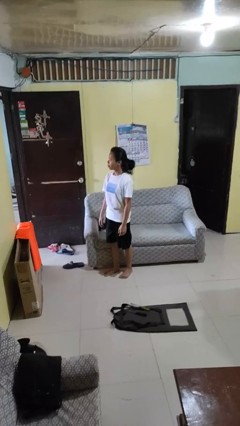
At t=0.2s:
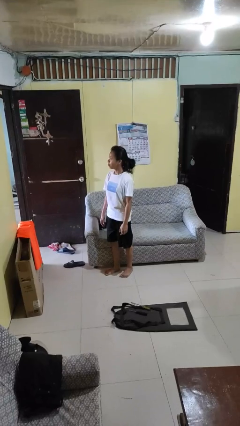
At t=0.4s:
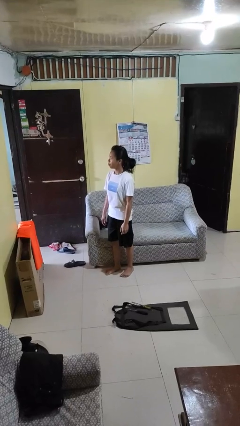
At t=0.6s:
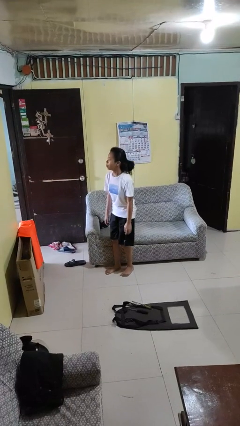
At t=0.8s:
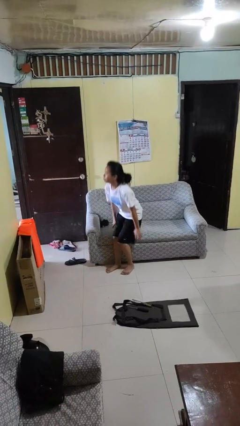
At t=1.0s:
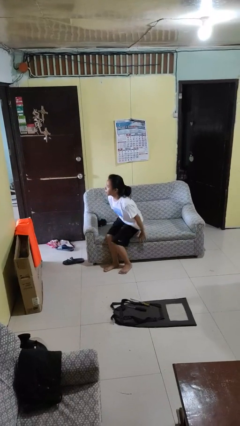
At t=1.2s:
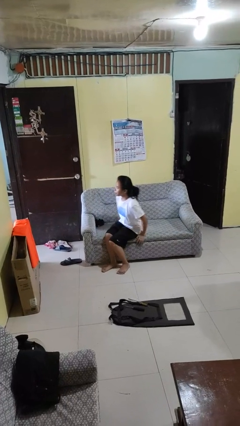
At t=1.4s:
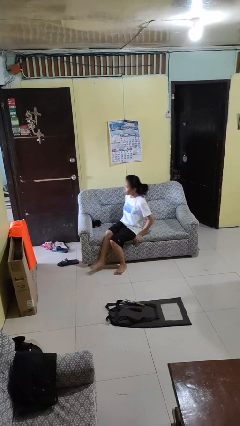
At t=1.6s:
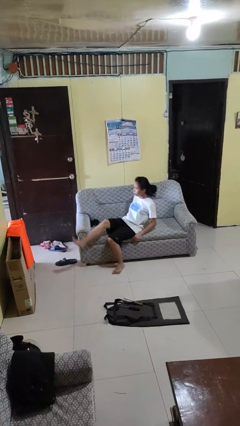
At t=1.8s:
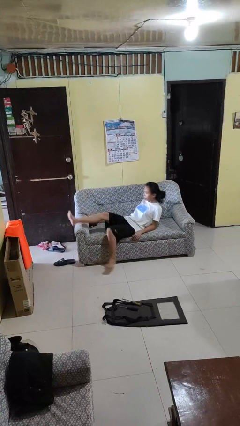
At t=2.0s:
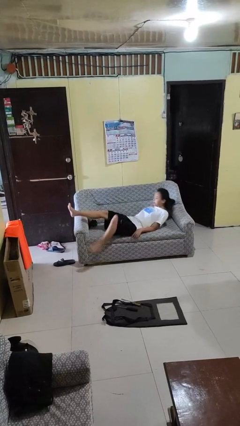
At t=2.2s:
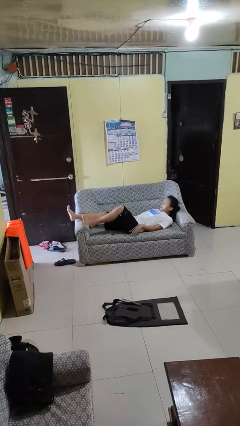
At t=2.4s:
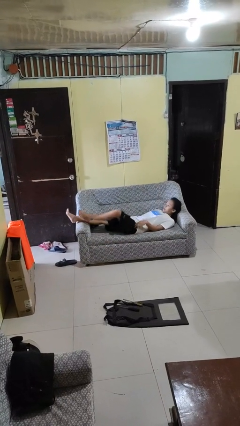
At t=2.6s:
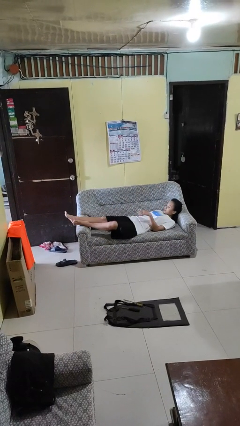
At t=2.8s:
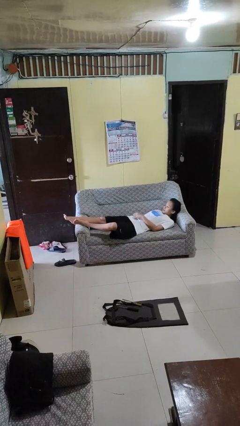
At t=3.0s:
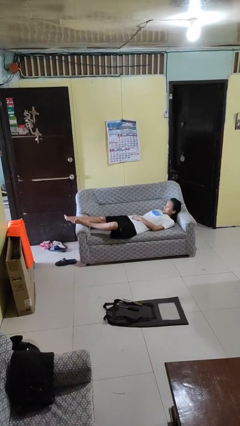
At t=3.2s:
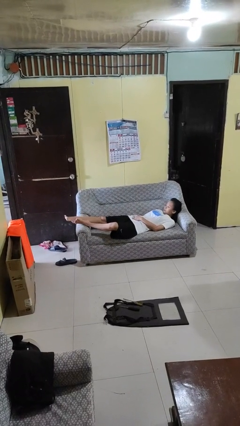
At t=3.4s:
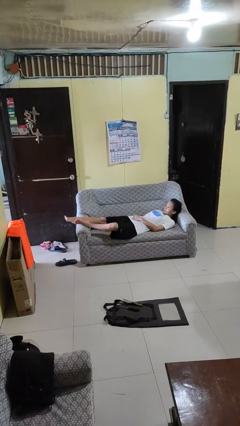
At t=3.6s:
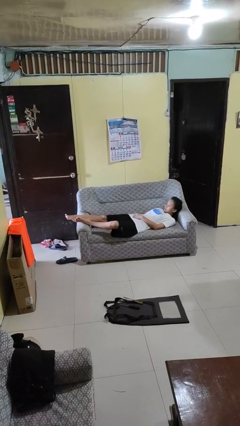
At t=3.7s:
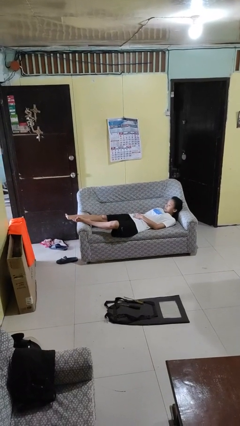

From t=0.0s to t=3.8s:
person lies down on couch

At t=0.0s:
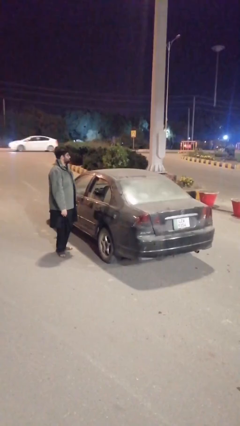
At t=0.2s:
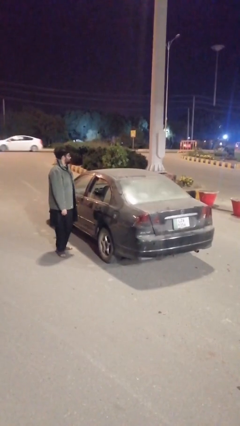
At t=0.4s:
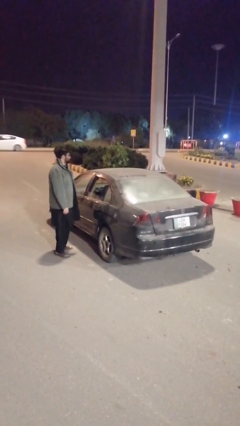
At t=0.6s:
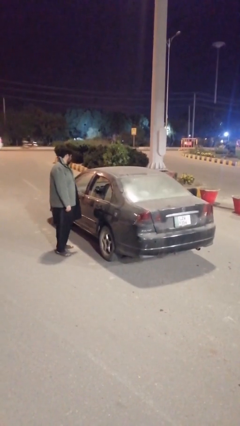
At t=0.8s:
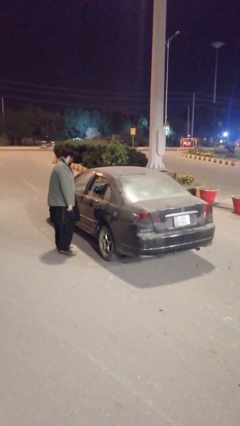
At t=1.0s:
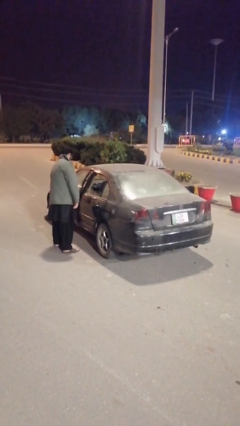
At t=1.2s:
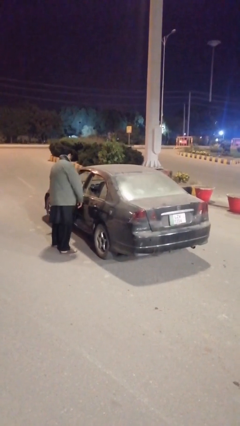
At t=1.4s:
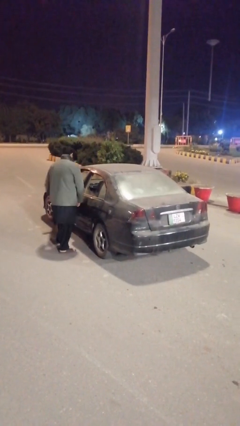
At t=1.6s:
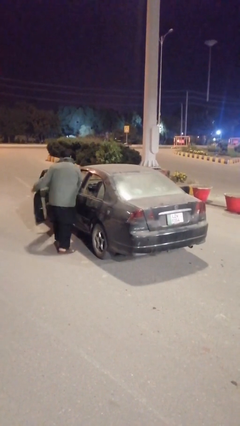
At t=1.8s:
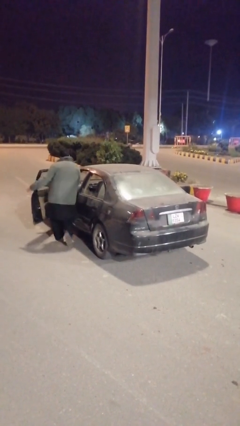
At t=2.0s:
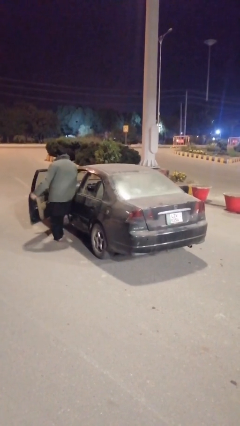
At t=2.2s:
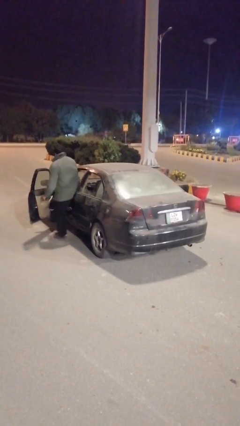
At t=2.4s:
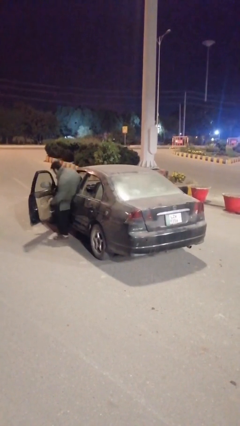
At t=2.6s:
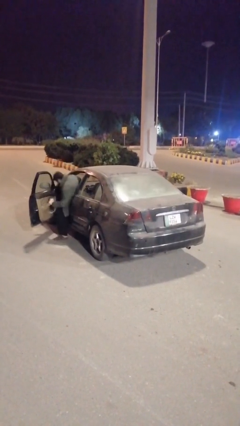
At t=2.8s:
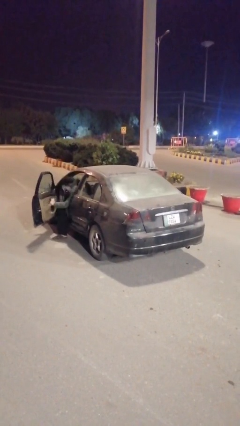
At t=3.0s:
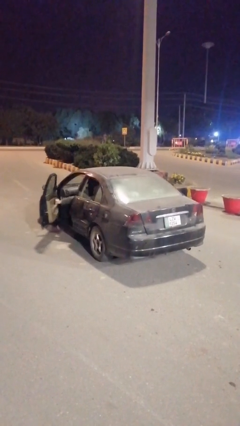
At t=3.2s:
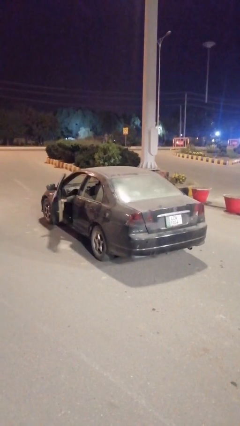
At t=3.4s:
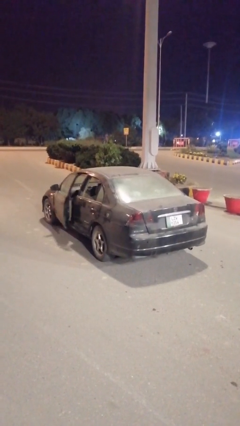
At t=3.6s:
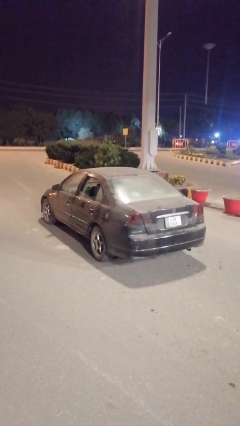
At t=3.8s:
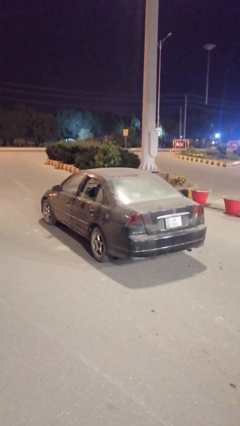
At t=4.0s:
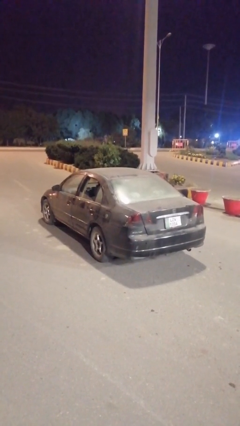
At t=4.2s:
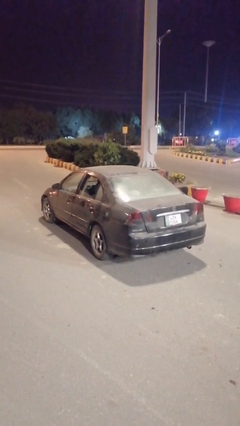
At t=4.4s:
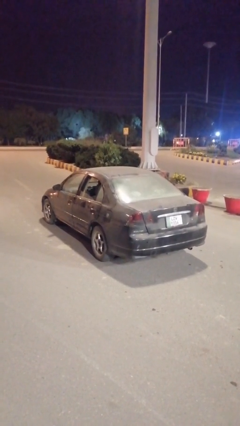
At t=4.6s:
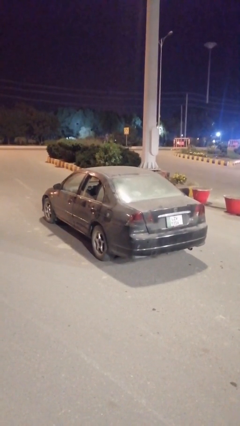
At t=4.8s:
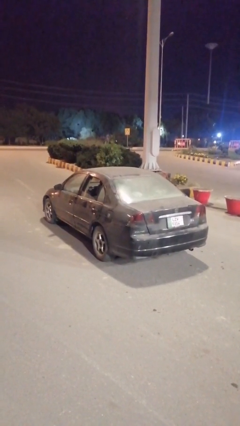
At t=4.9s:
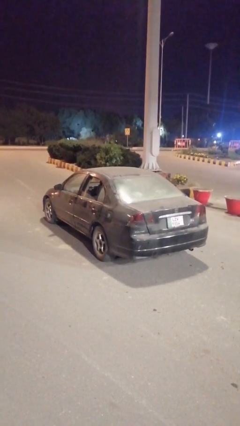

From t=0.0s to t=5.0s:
car picks up person

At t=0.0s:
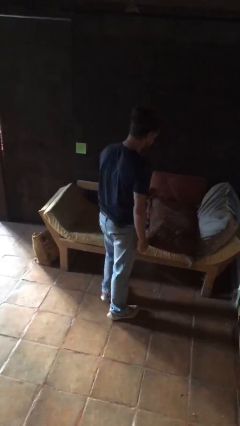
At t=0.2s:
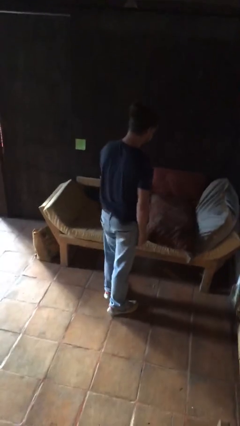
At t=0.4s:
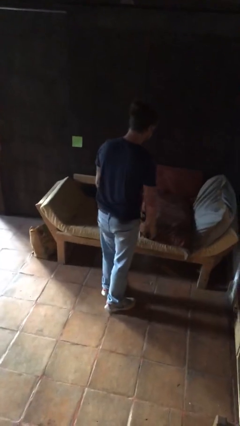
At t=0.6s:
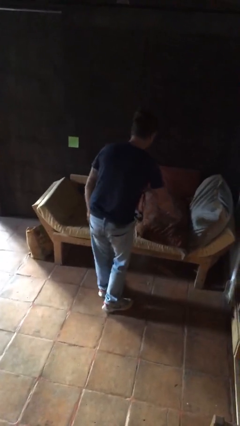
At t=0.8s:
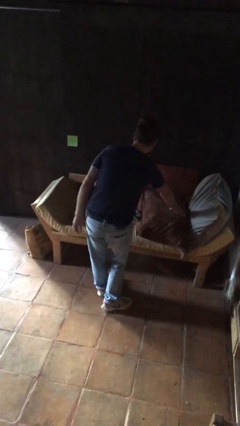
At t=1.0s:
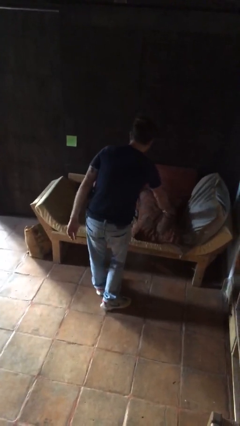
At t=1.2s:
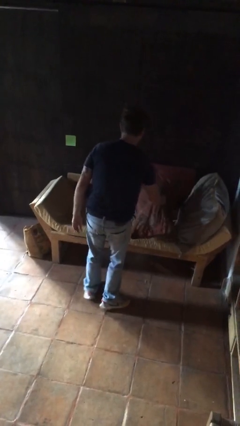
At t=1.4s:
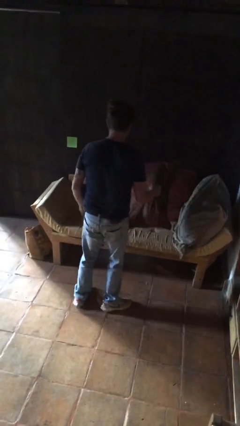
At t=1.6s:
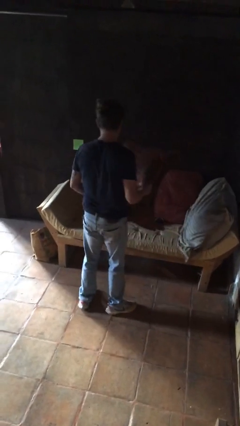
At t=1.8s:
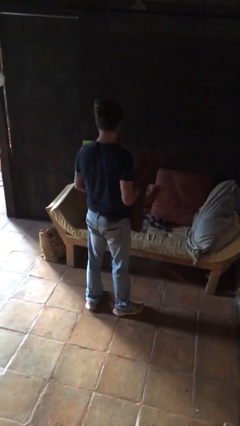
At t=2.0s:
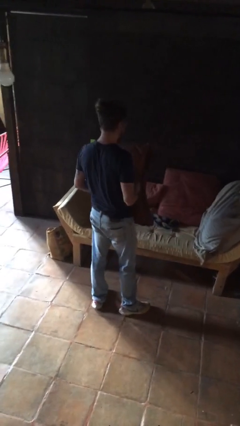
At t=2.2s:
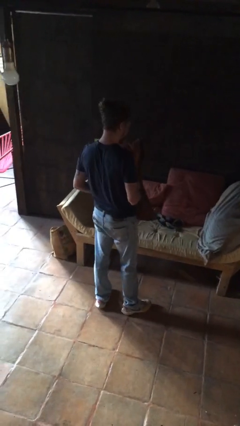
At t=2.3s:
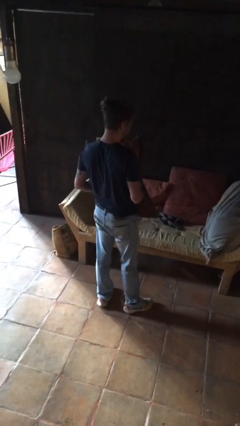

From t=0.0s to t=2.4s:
person picks up object from couch

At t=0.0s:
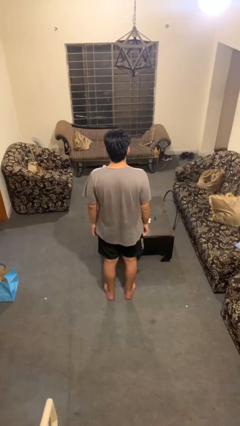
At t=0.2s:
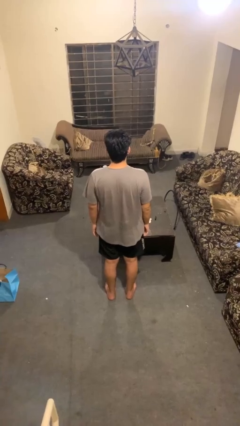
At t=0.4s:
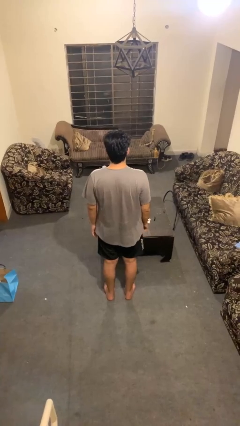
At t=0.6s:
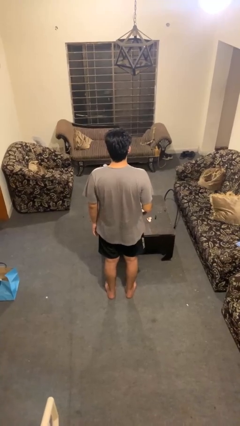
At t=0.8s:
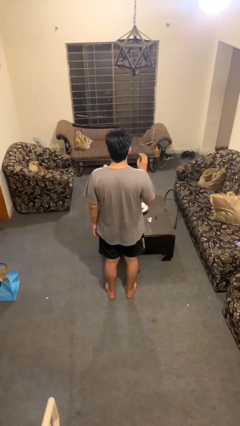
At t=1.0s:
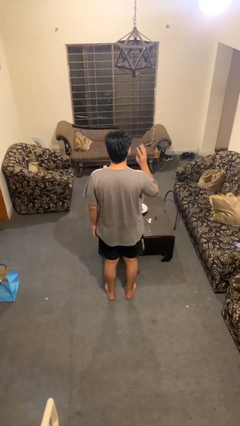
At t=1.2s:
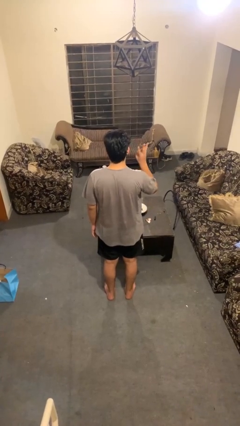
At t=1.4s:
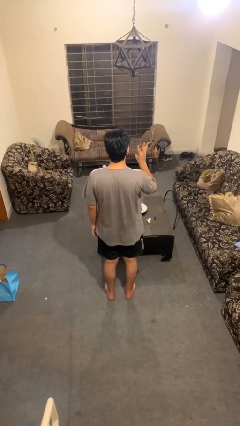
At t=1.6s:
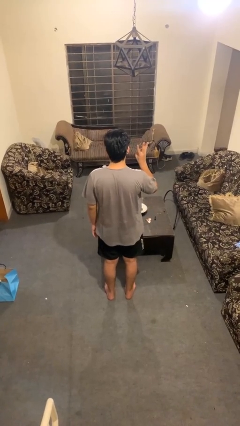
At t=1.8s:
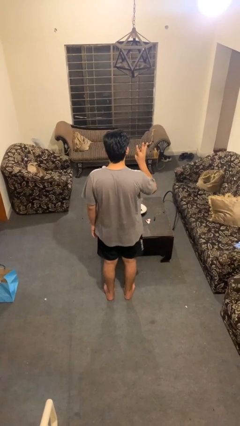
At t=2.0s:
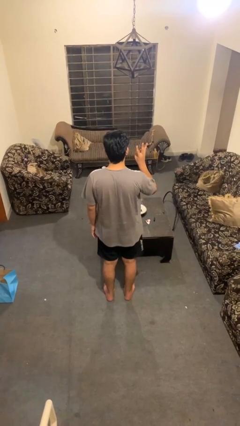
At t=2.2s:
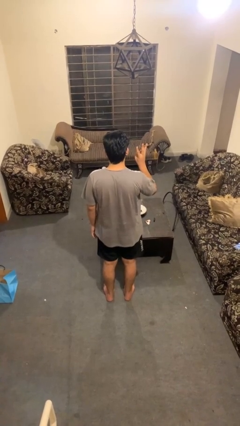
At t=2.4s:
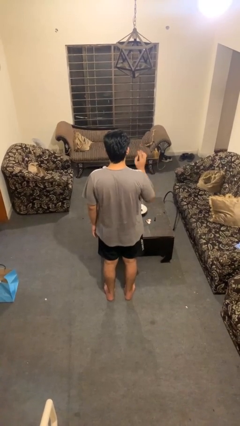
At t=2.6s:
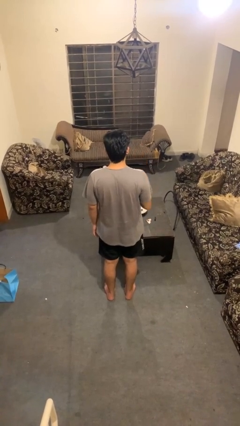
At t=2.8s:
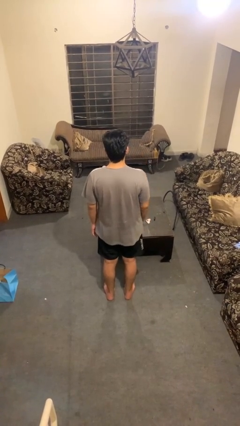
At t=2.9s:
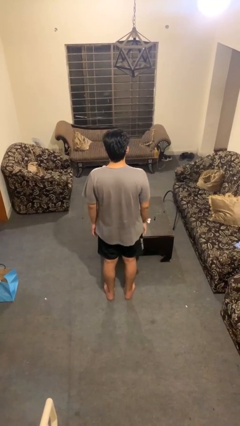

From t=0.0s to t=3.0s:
person gestures number three

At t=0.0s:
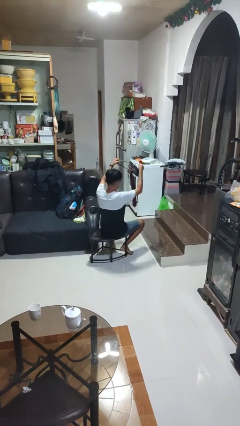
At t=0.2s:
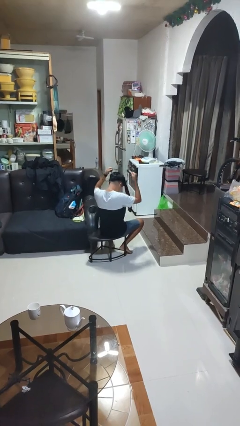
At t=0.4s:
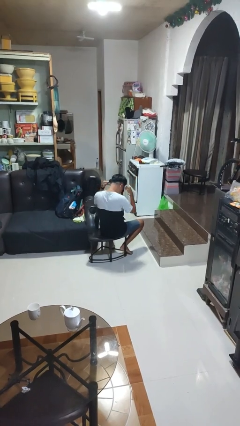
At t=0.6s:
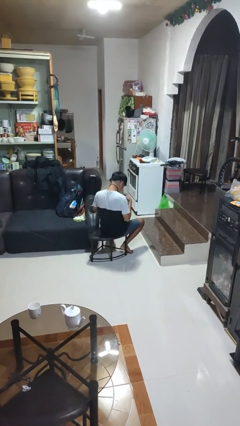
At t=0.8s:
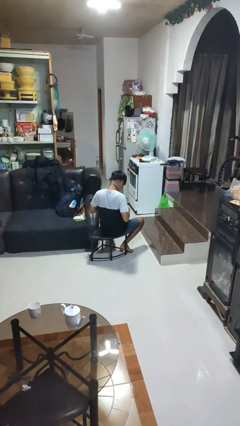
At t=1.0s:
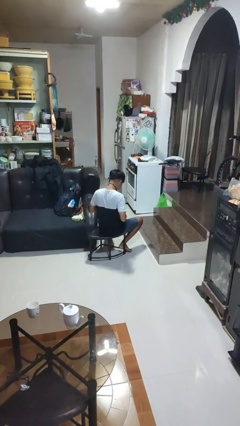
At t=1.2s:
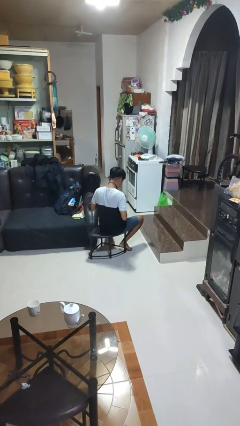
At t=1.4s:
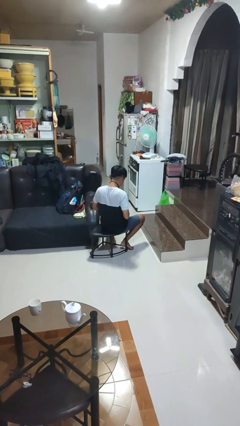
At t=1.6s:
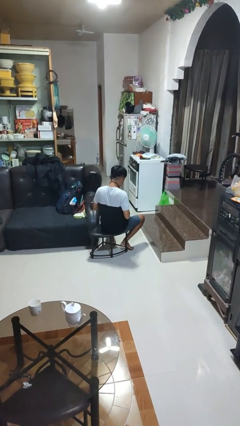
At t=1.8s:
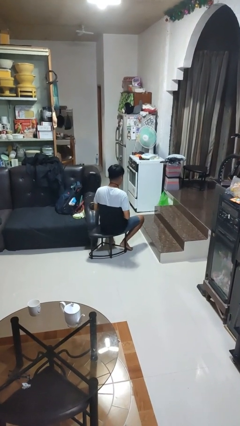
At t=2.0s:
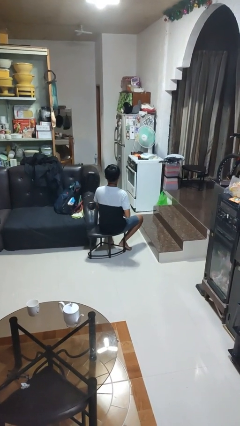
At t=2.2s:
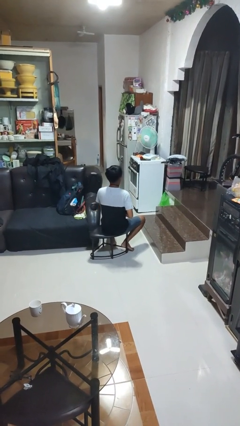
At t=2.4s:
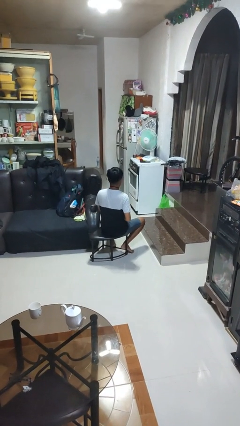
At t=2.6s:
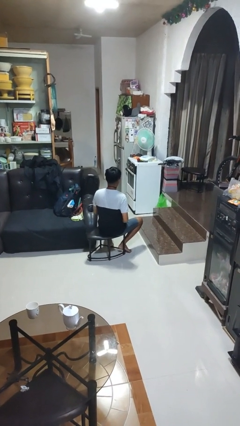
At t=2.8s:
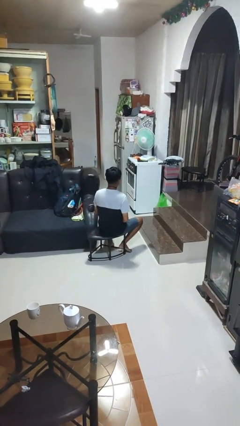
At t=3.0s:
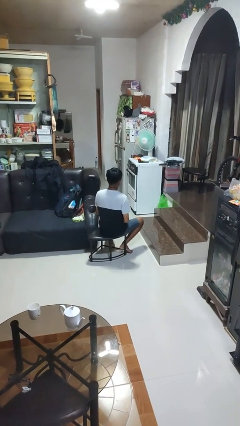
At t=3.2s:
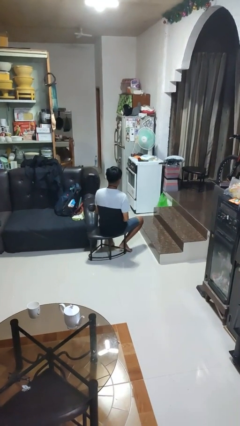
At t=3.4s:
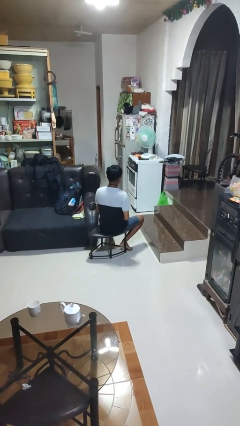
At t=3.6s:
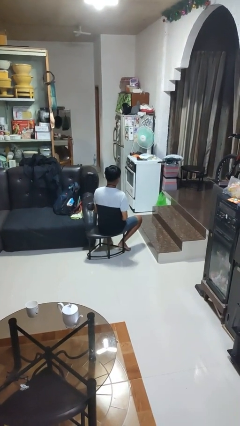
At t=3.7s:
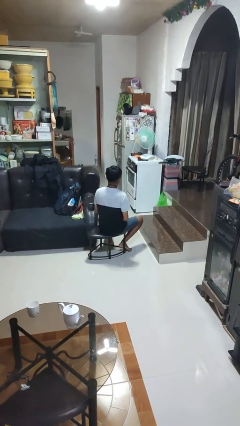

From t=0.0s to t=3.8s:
person puts on necktie
